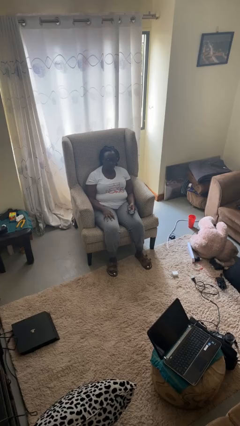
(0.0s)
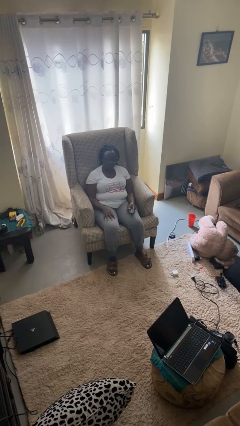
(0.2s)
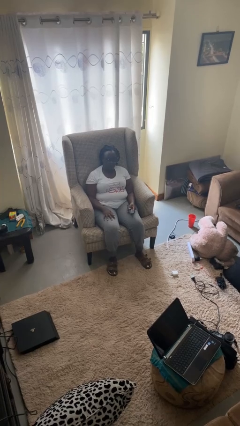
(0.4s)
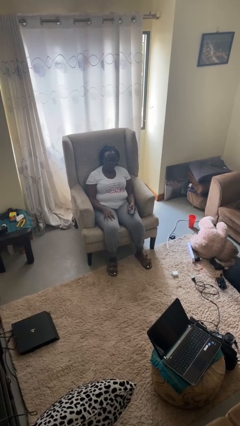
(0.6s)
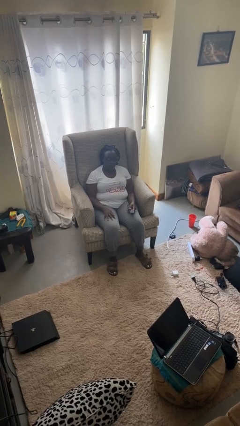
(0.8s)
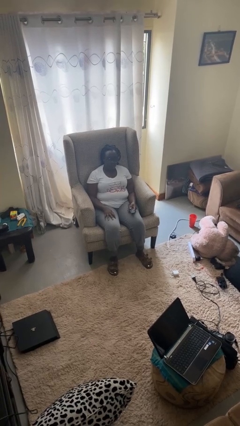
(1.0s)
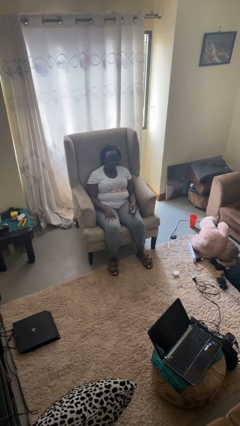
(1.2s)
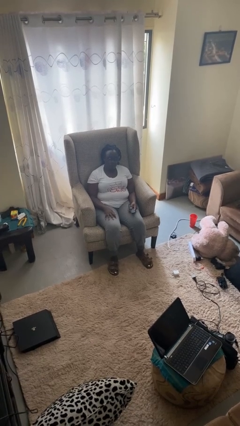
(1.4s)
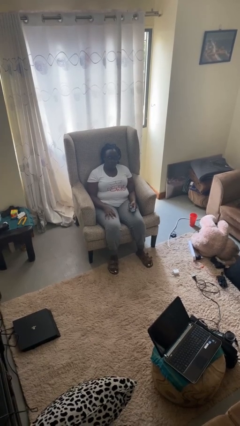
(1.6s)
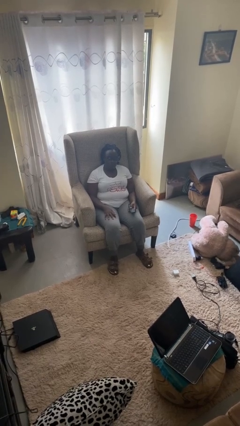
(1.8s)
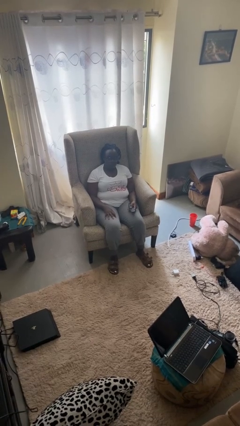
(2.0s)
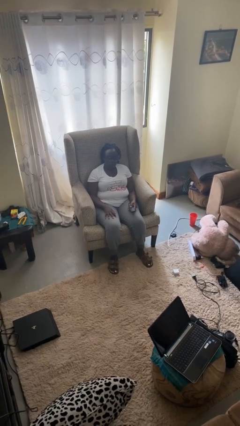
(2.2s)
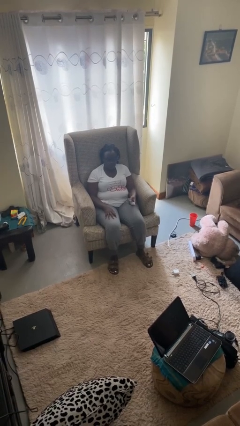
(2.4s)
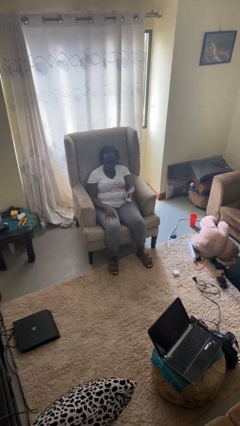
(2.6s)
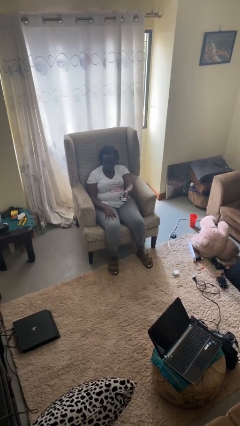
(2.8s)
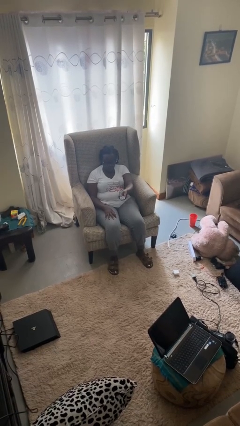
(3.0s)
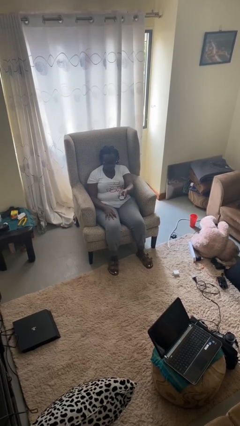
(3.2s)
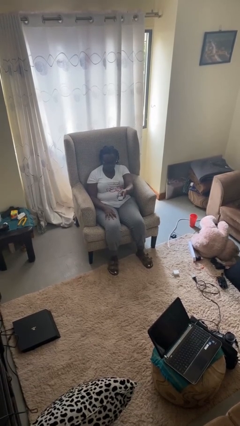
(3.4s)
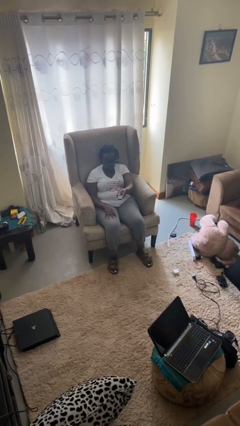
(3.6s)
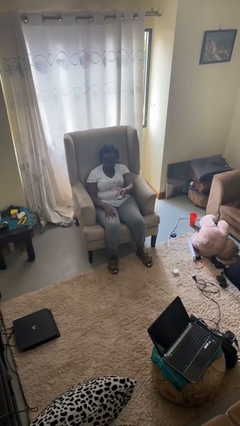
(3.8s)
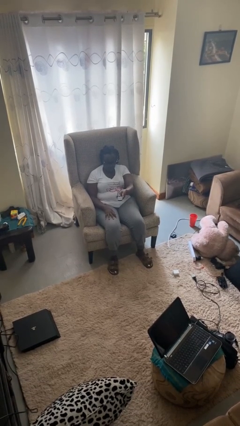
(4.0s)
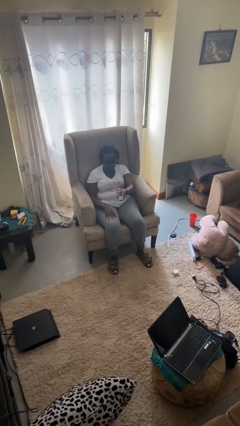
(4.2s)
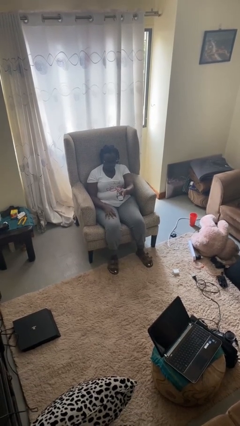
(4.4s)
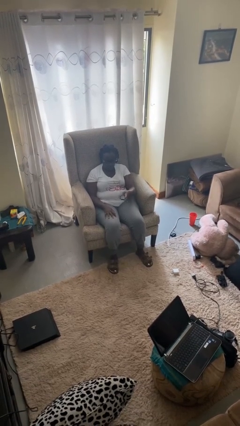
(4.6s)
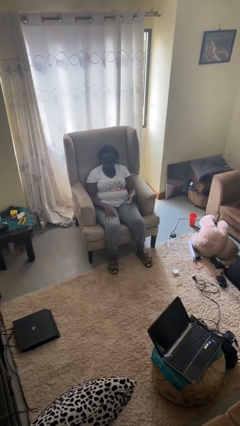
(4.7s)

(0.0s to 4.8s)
person uses television remote

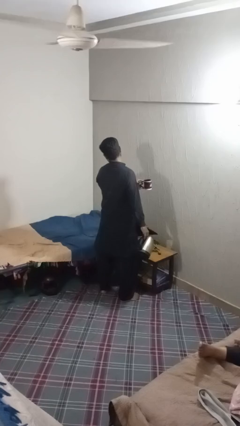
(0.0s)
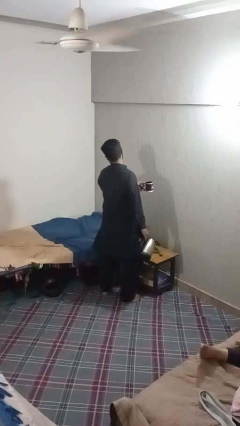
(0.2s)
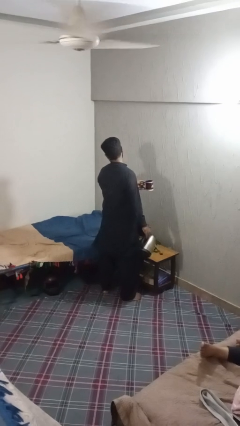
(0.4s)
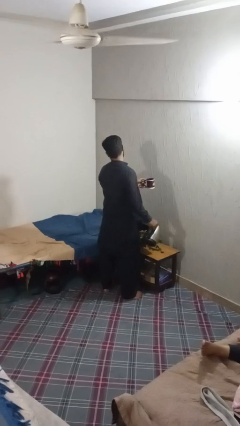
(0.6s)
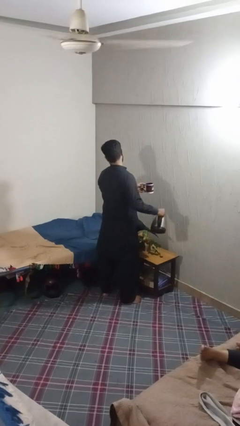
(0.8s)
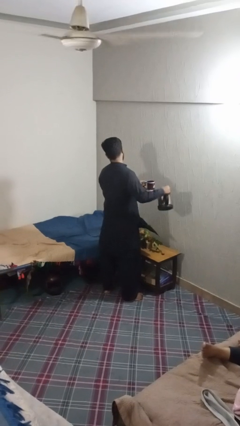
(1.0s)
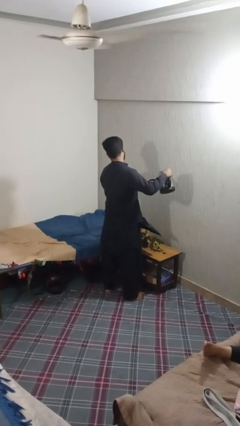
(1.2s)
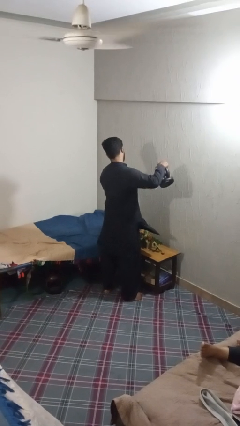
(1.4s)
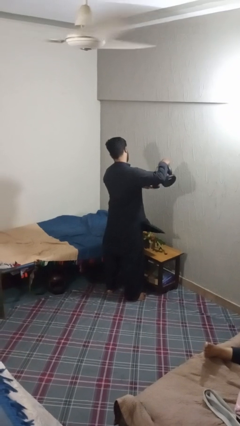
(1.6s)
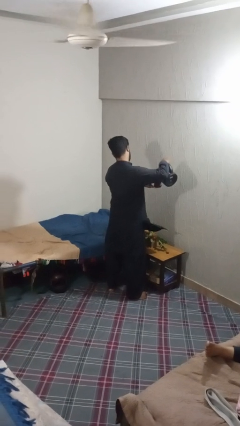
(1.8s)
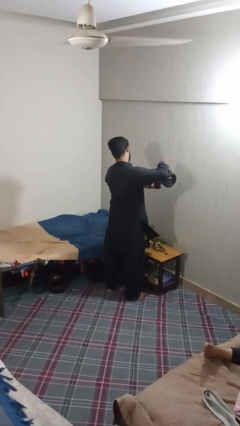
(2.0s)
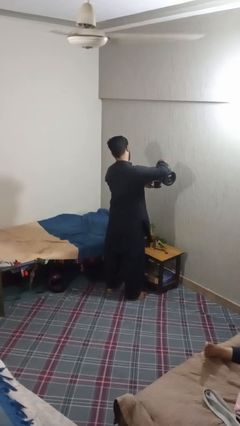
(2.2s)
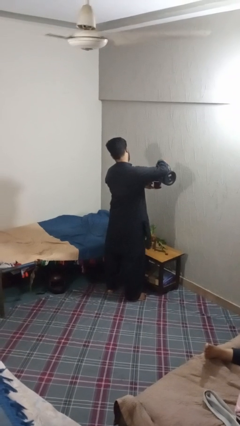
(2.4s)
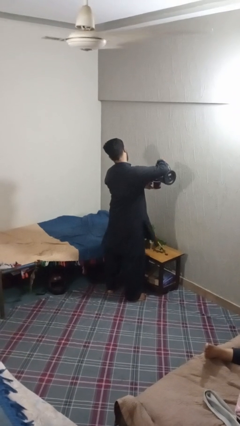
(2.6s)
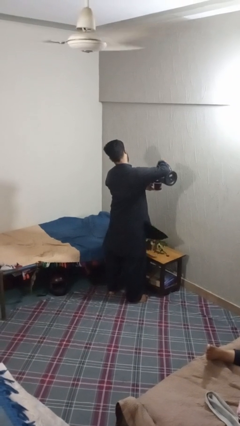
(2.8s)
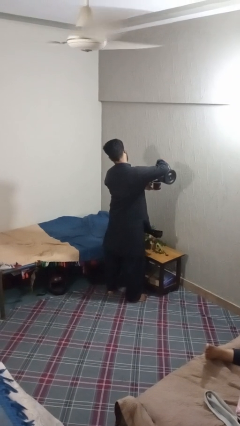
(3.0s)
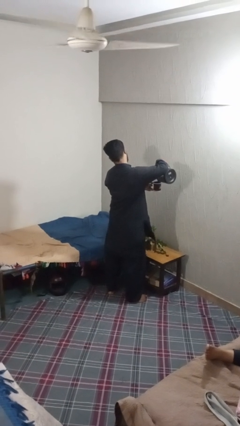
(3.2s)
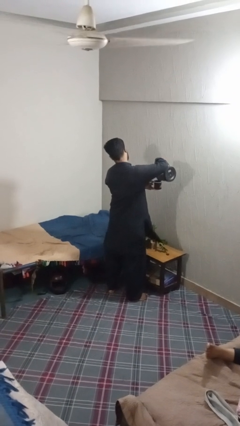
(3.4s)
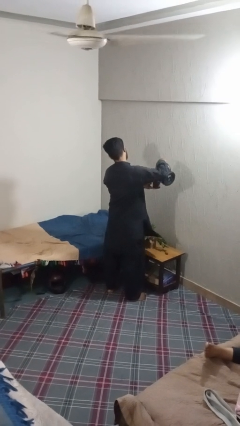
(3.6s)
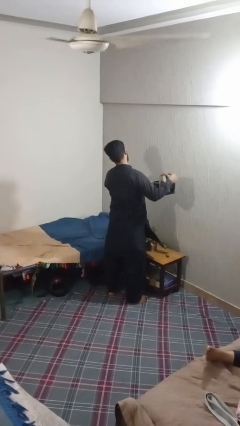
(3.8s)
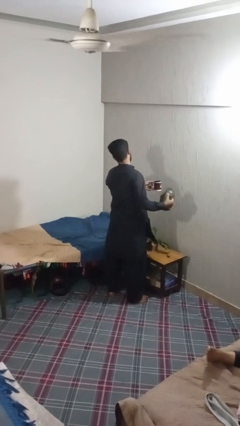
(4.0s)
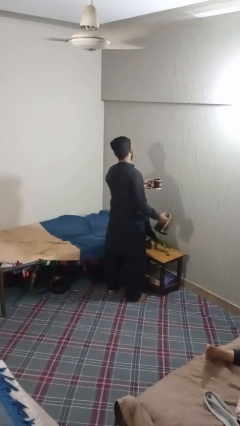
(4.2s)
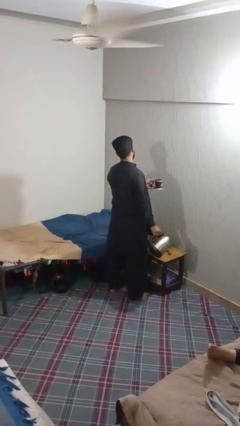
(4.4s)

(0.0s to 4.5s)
person pours coffee into mug

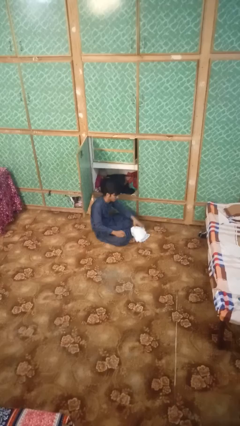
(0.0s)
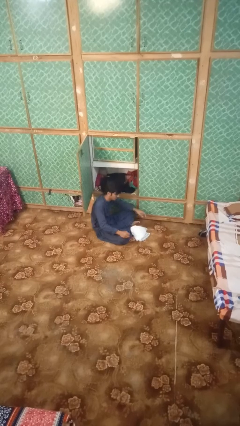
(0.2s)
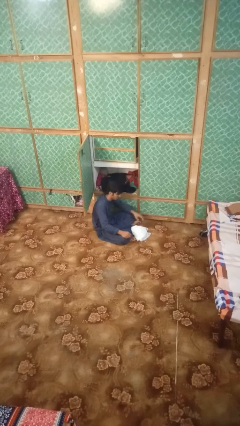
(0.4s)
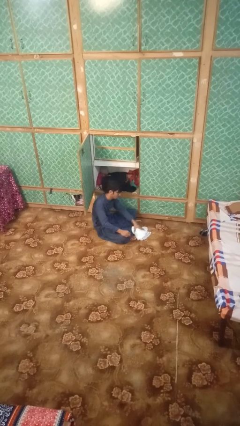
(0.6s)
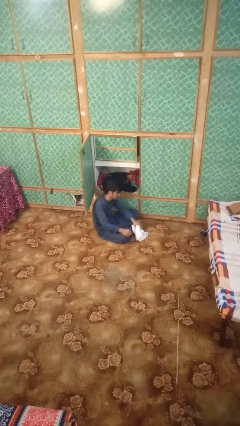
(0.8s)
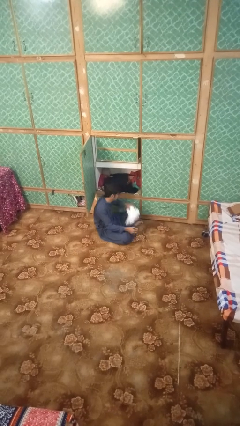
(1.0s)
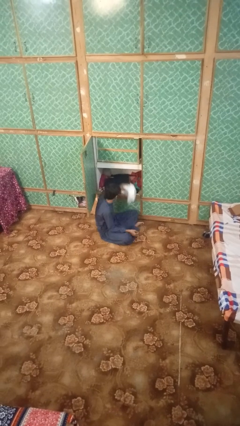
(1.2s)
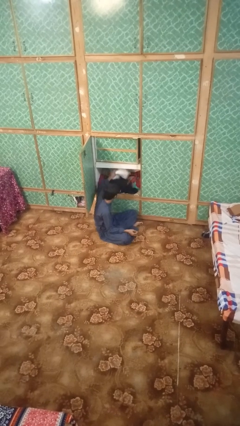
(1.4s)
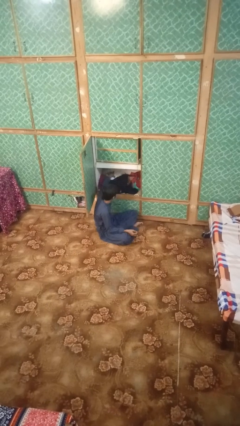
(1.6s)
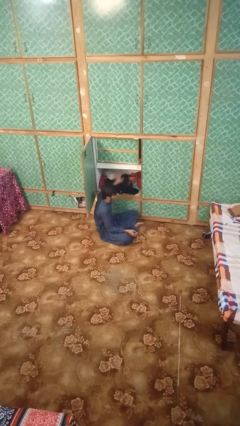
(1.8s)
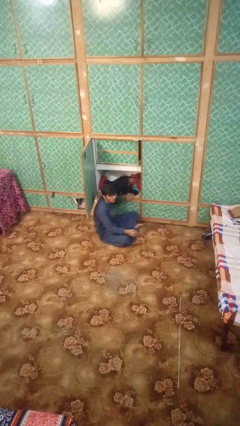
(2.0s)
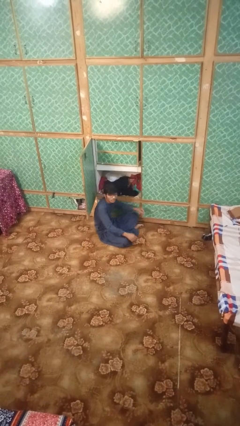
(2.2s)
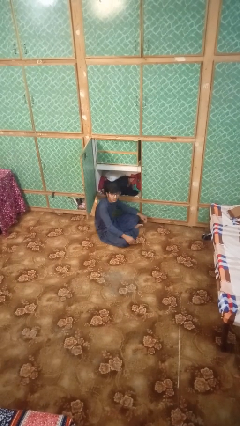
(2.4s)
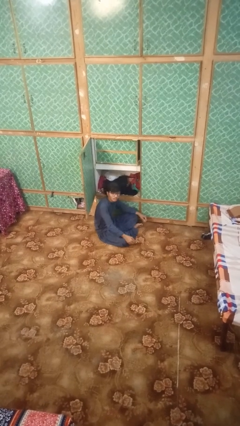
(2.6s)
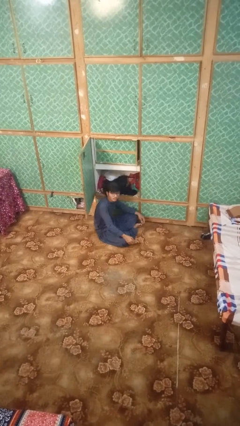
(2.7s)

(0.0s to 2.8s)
person puts clothes into dresser

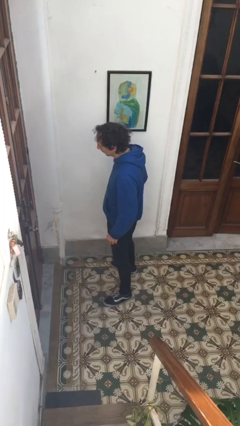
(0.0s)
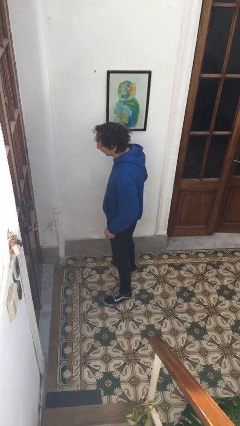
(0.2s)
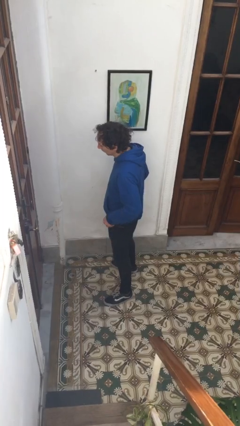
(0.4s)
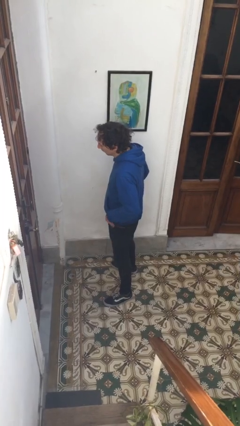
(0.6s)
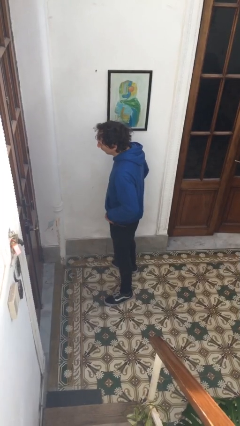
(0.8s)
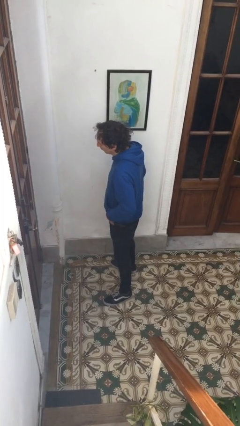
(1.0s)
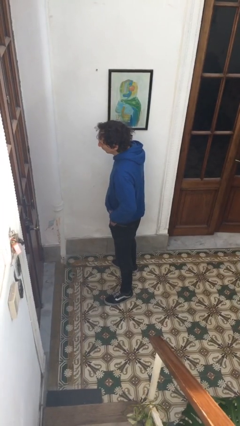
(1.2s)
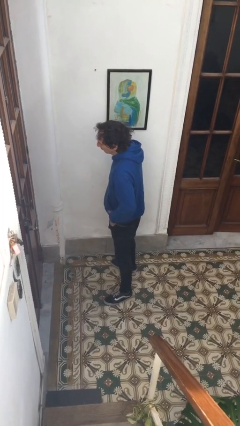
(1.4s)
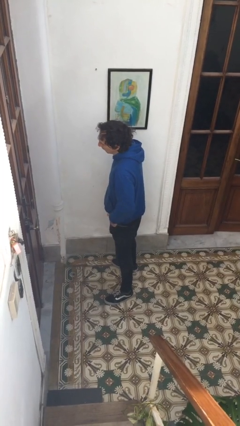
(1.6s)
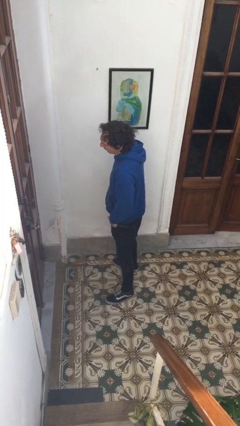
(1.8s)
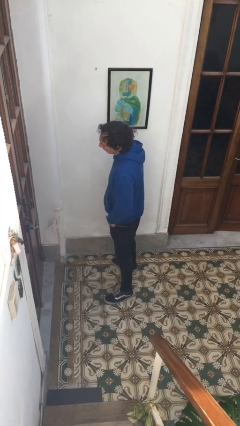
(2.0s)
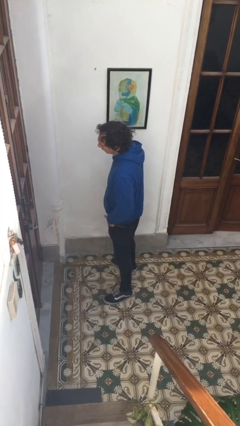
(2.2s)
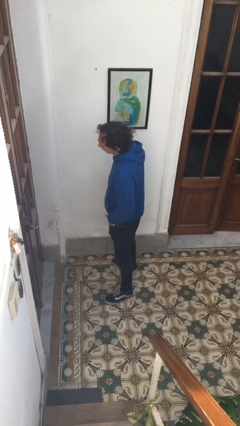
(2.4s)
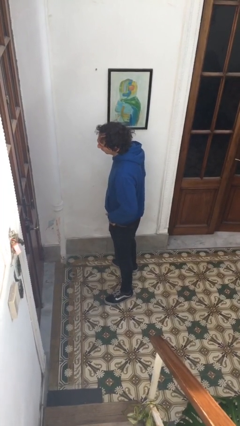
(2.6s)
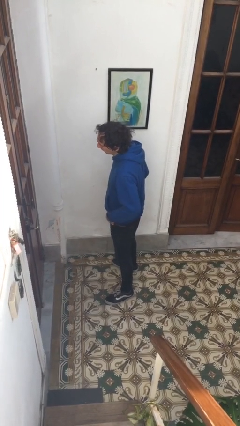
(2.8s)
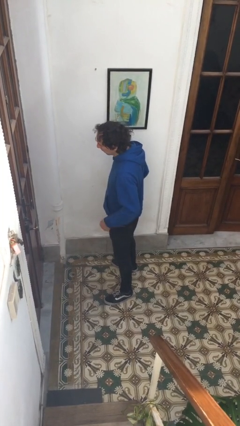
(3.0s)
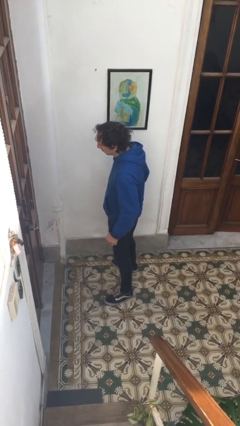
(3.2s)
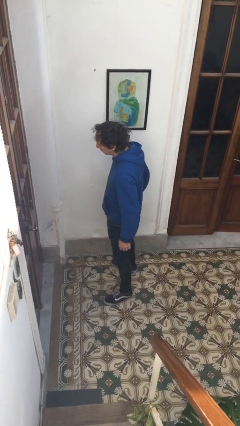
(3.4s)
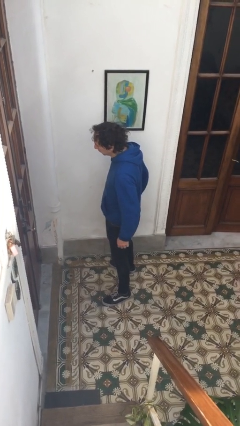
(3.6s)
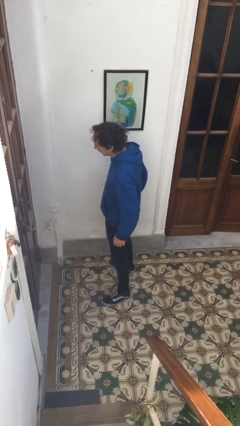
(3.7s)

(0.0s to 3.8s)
person puts hands in back pockets

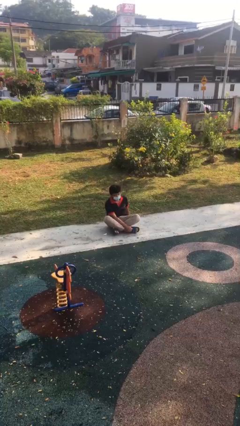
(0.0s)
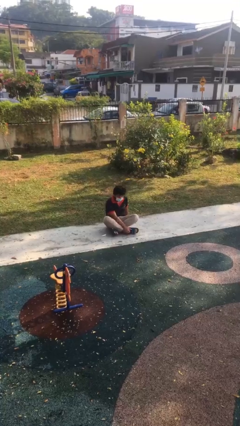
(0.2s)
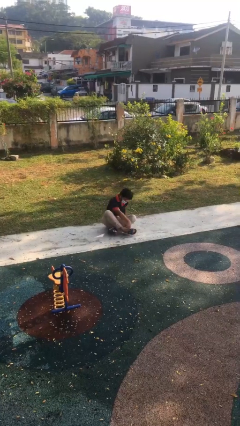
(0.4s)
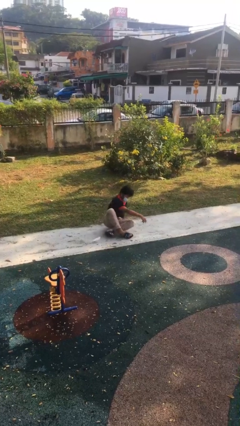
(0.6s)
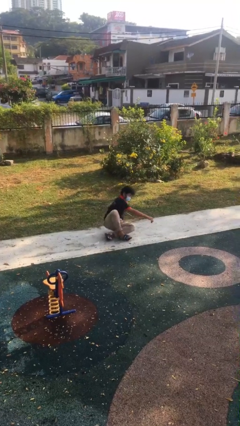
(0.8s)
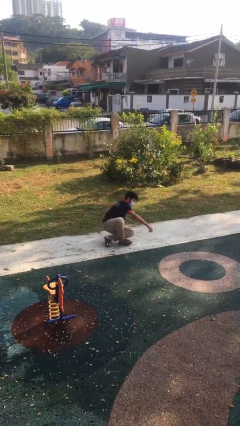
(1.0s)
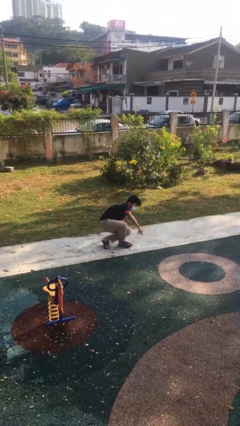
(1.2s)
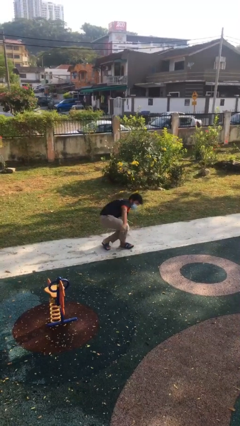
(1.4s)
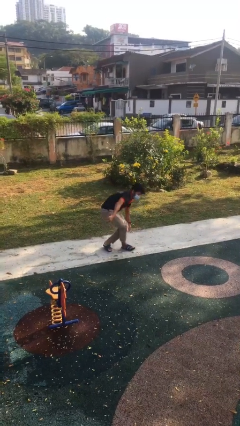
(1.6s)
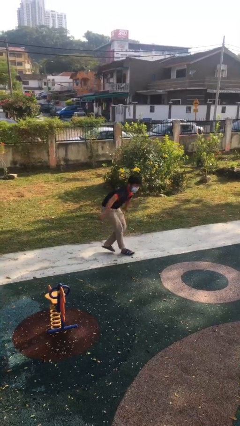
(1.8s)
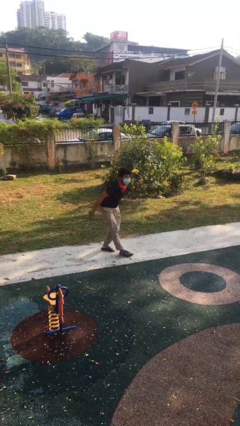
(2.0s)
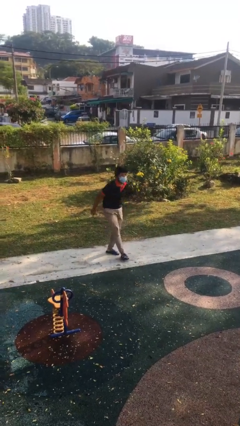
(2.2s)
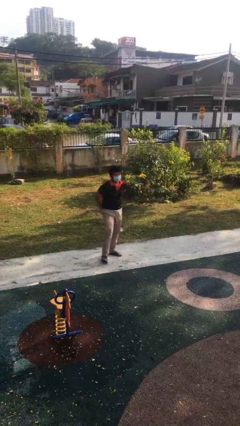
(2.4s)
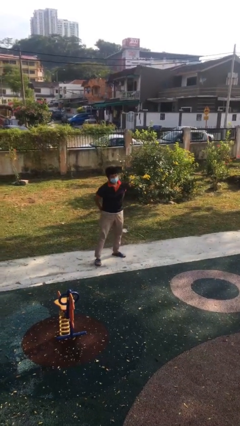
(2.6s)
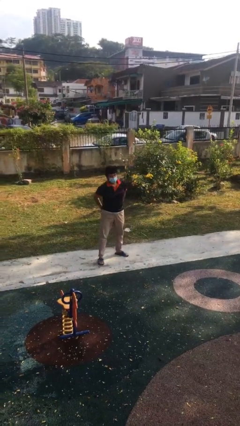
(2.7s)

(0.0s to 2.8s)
person stands up from floor
